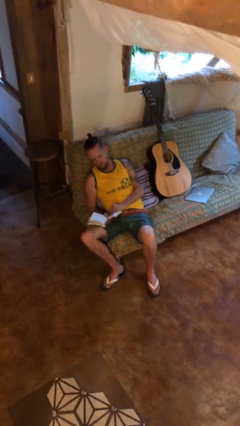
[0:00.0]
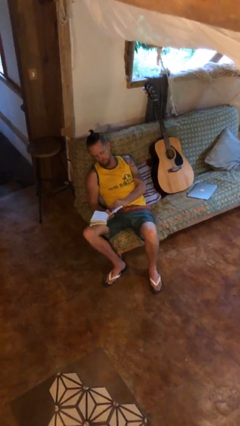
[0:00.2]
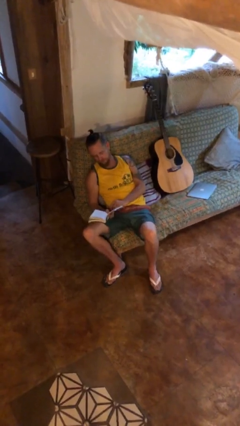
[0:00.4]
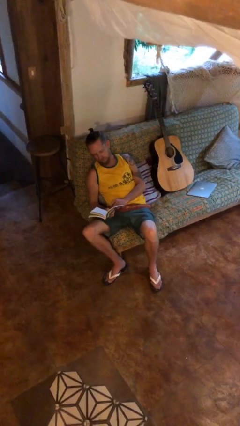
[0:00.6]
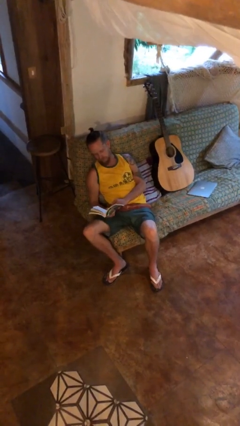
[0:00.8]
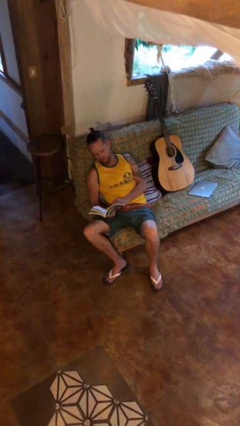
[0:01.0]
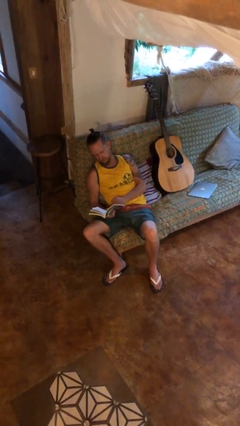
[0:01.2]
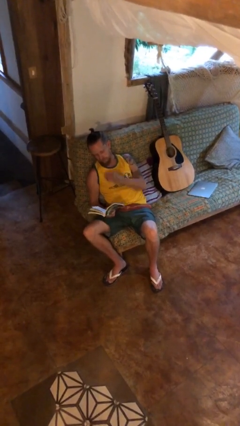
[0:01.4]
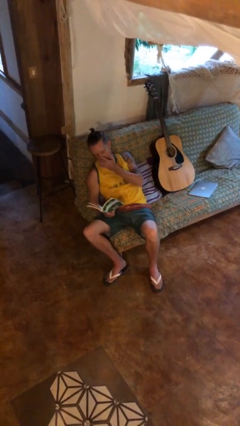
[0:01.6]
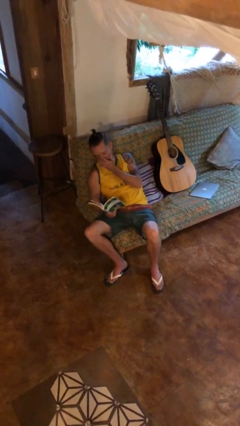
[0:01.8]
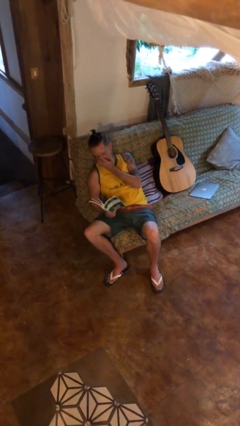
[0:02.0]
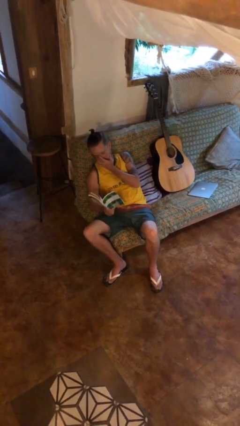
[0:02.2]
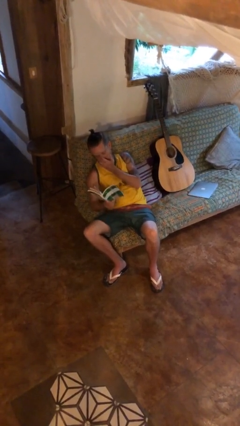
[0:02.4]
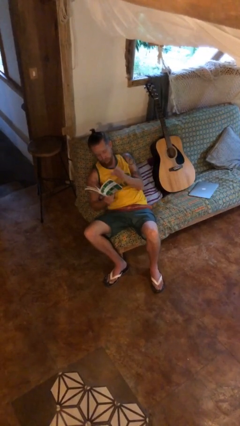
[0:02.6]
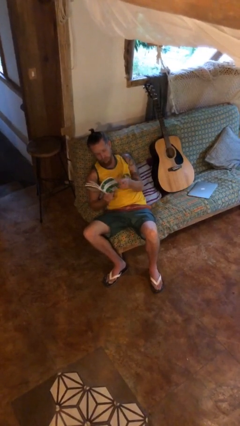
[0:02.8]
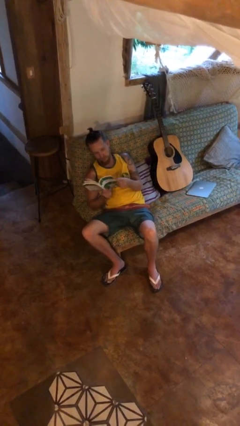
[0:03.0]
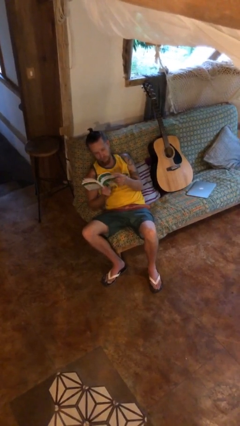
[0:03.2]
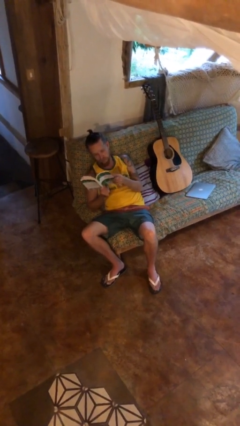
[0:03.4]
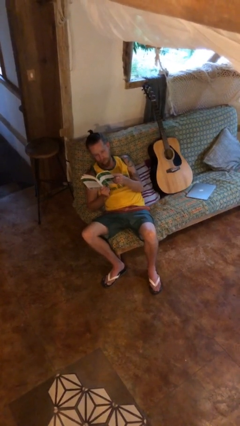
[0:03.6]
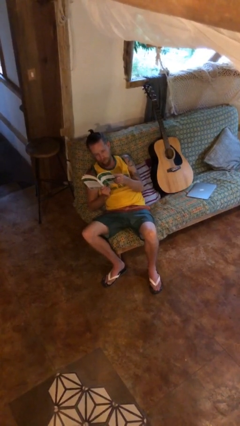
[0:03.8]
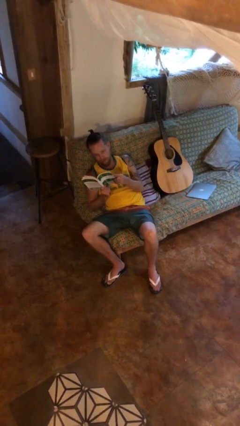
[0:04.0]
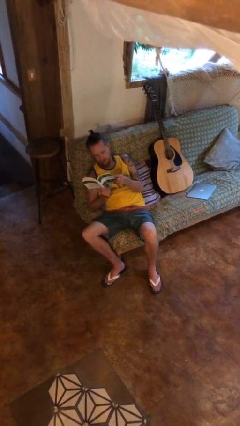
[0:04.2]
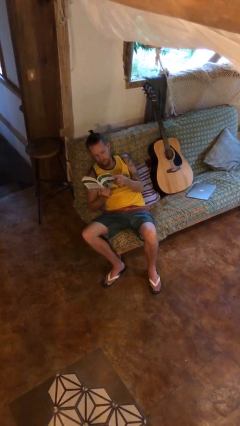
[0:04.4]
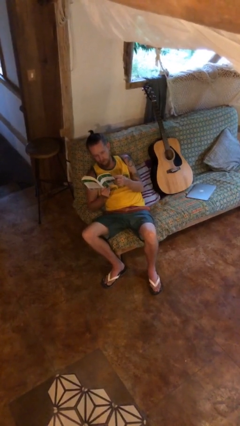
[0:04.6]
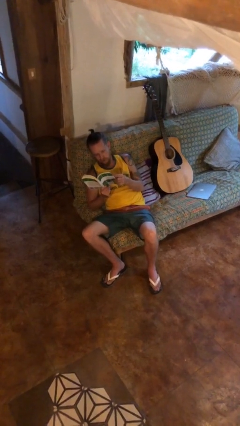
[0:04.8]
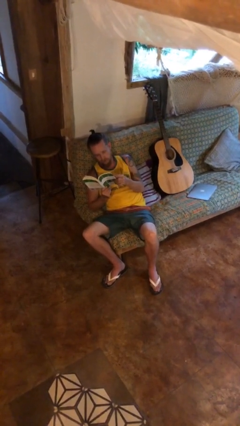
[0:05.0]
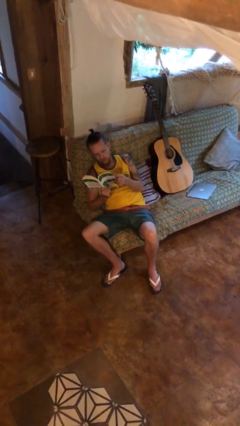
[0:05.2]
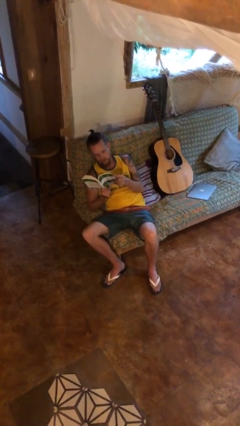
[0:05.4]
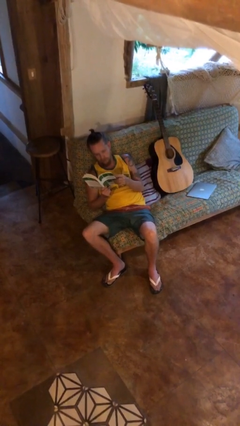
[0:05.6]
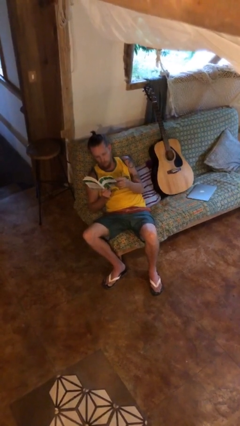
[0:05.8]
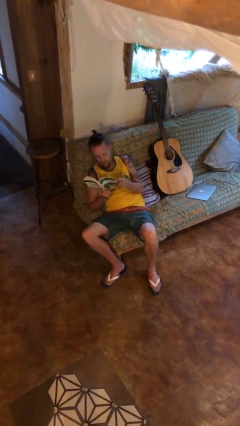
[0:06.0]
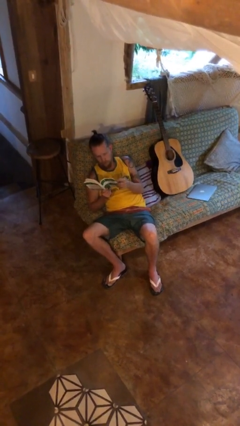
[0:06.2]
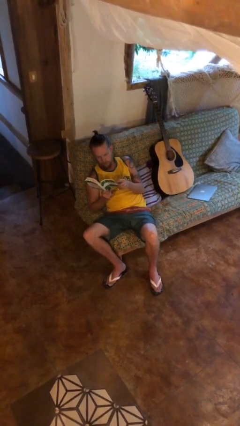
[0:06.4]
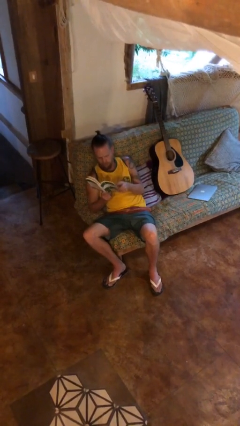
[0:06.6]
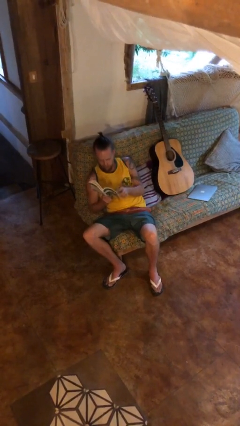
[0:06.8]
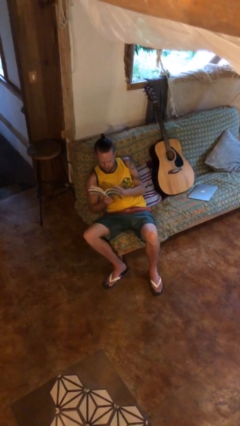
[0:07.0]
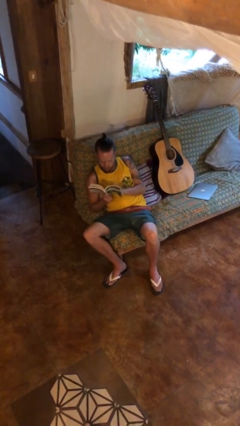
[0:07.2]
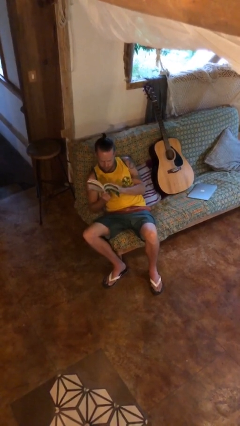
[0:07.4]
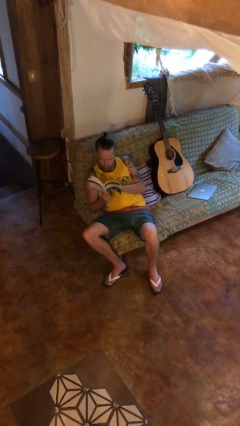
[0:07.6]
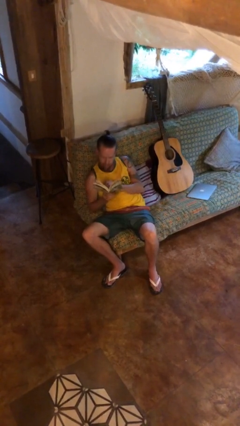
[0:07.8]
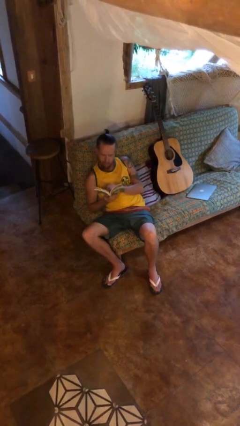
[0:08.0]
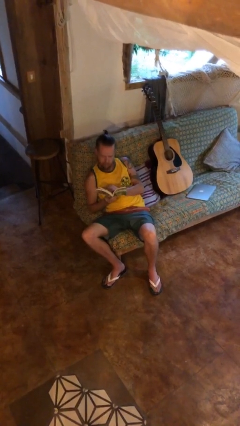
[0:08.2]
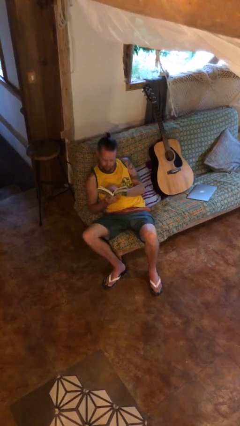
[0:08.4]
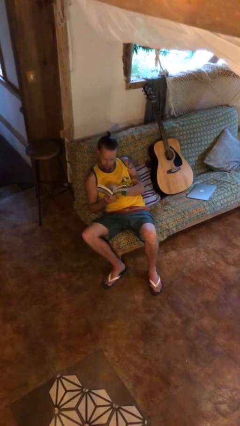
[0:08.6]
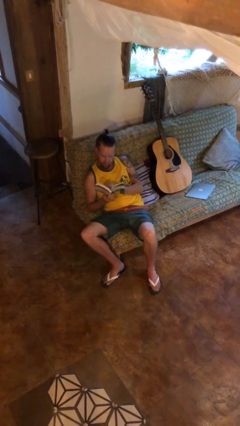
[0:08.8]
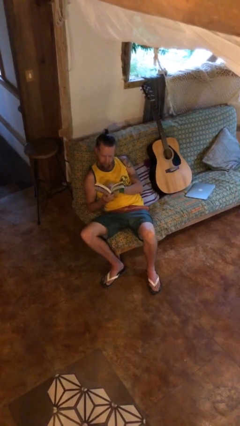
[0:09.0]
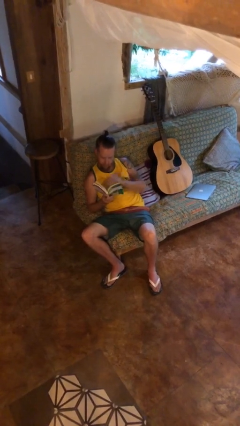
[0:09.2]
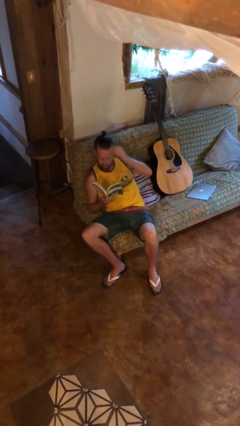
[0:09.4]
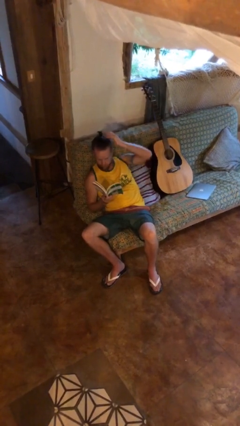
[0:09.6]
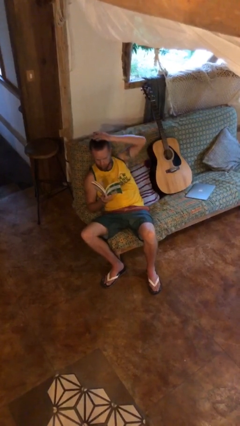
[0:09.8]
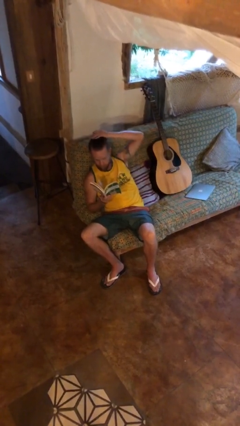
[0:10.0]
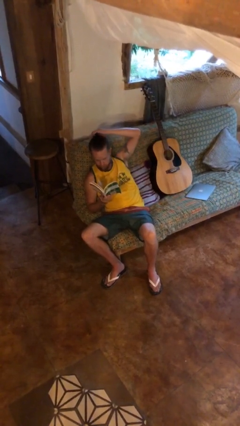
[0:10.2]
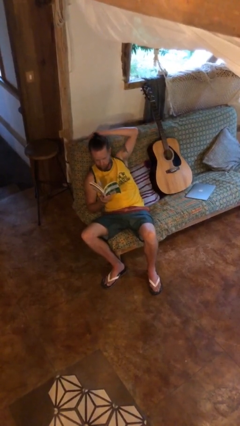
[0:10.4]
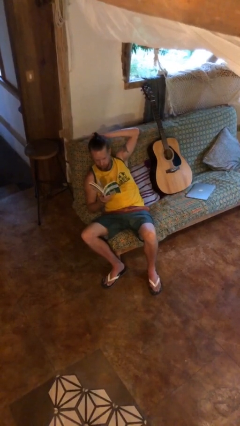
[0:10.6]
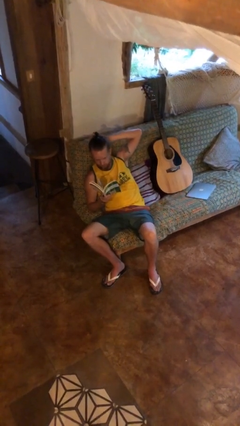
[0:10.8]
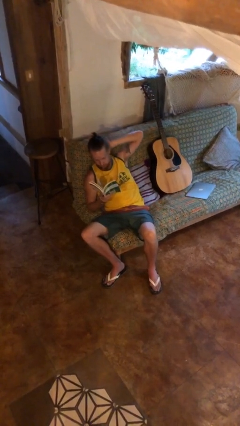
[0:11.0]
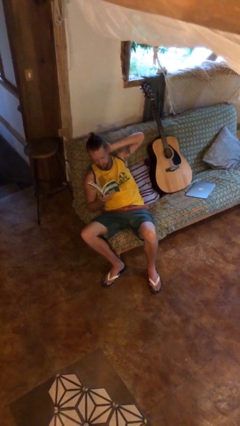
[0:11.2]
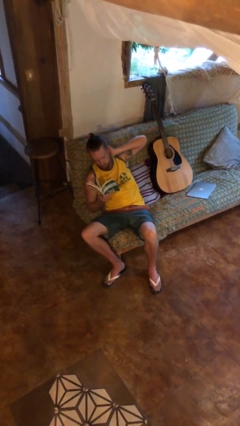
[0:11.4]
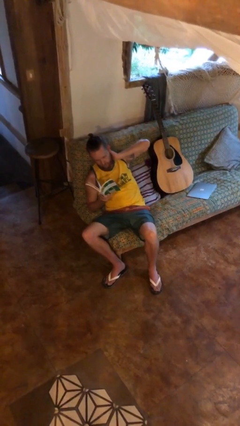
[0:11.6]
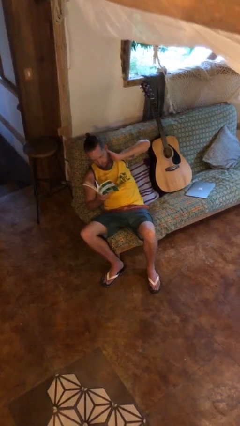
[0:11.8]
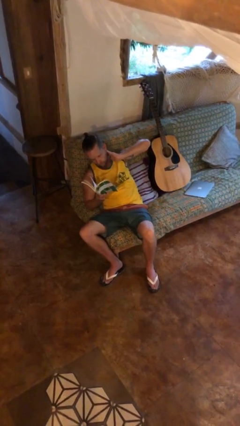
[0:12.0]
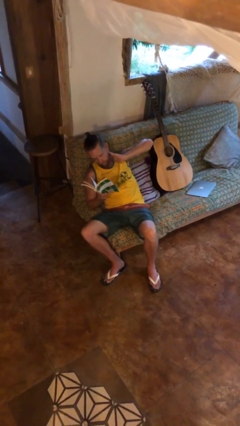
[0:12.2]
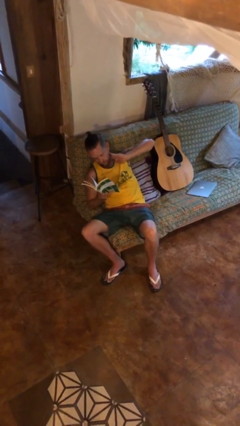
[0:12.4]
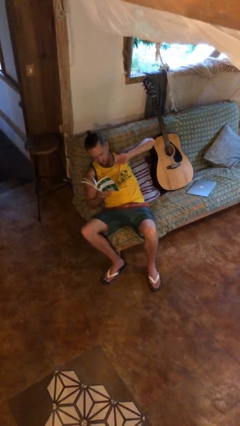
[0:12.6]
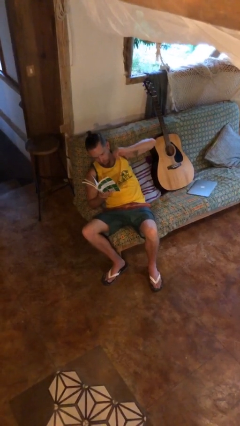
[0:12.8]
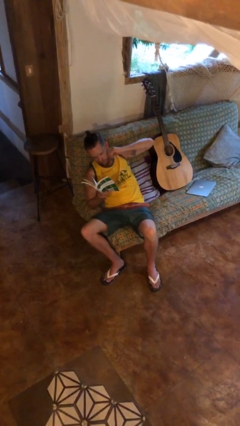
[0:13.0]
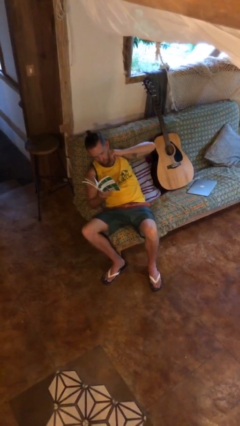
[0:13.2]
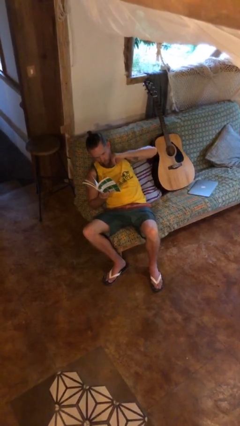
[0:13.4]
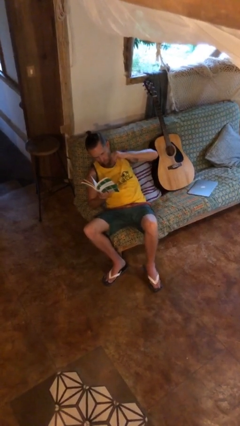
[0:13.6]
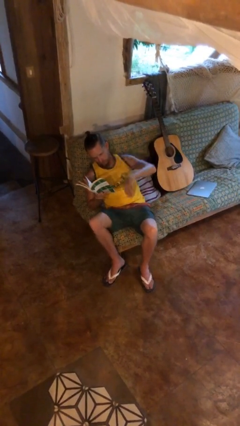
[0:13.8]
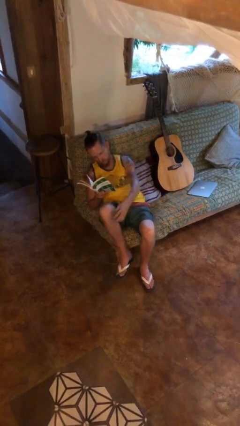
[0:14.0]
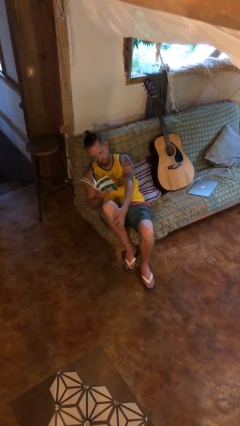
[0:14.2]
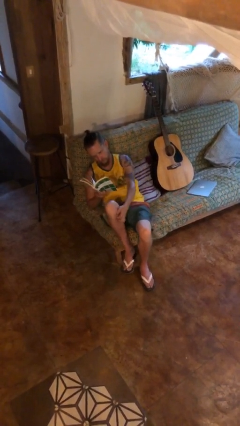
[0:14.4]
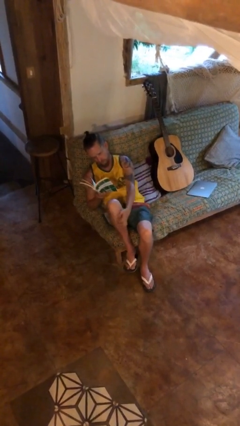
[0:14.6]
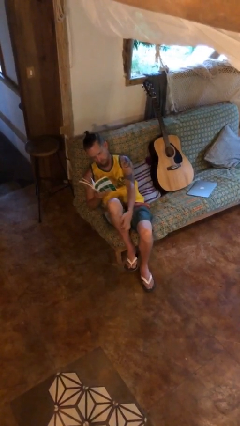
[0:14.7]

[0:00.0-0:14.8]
person reads document

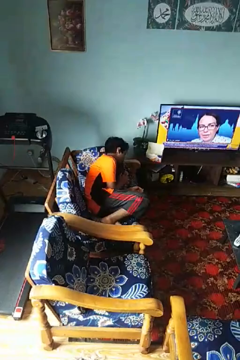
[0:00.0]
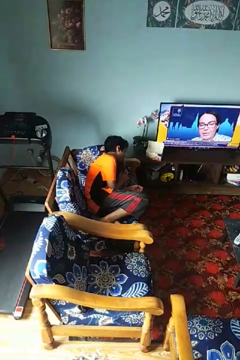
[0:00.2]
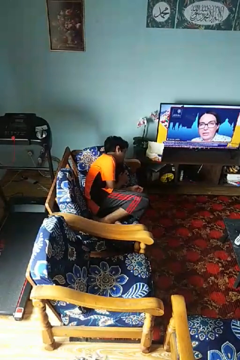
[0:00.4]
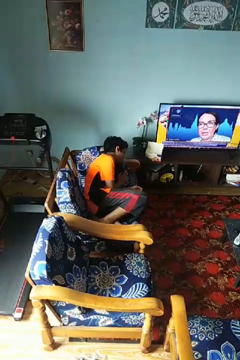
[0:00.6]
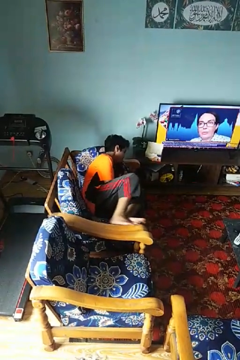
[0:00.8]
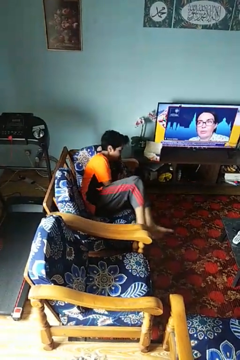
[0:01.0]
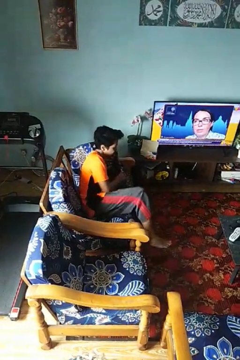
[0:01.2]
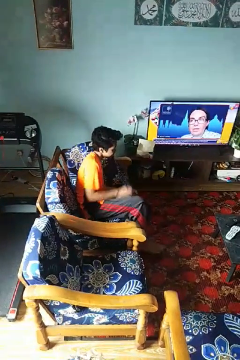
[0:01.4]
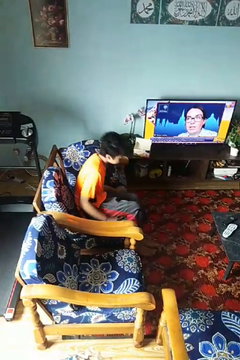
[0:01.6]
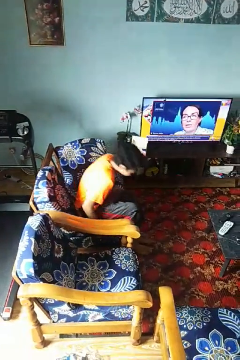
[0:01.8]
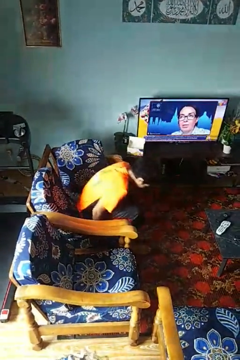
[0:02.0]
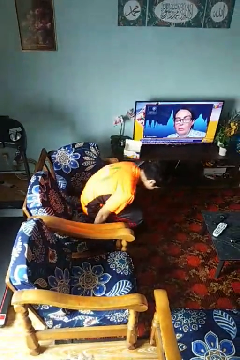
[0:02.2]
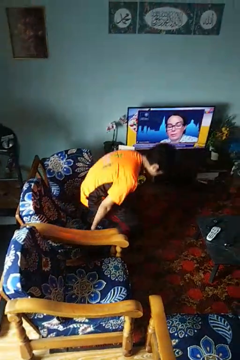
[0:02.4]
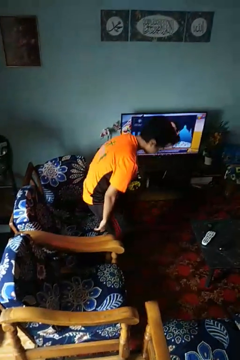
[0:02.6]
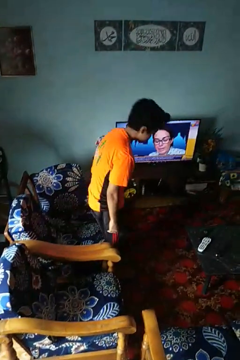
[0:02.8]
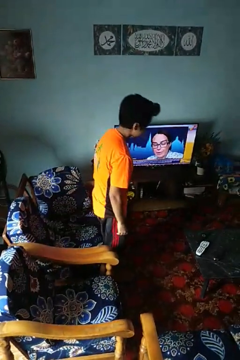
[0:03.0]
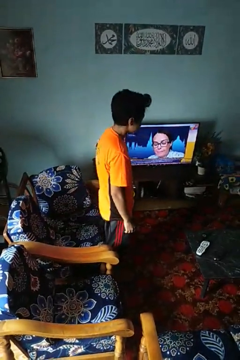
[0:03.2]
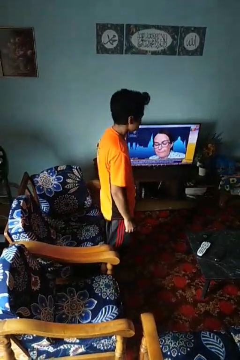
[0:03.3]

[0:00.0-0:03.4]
person stands up

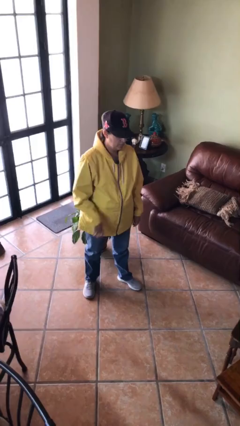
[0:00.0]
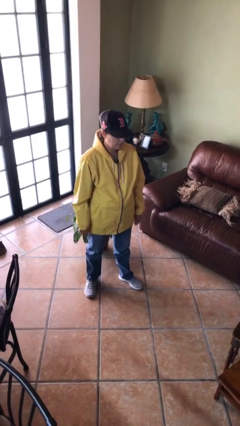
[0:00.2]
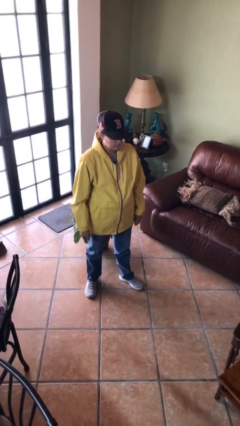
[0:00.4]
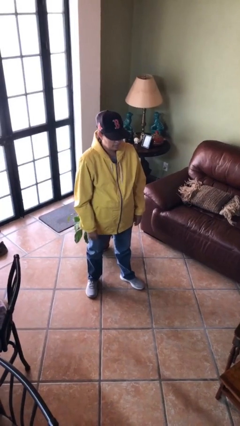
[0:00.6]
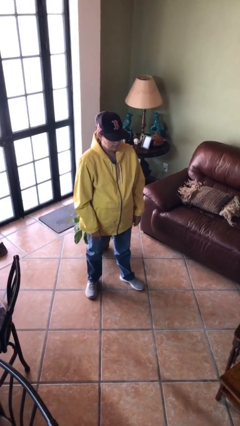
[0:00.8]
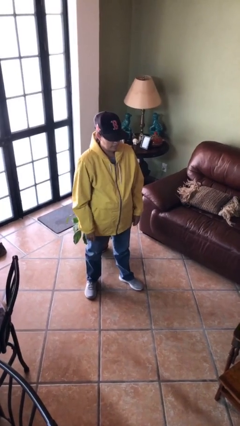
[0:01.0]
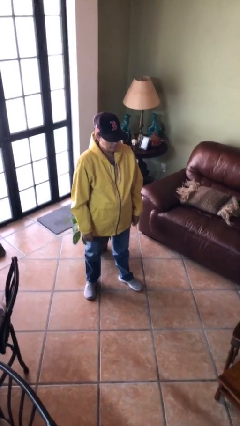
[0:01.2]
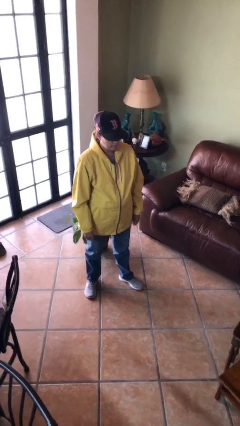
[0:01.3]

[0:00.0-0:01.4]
person gestures lower hand
